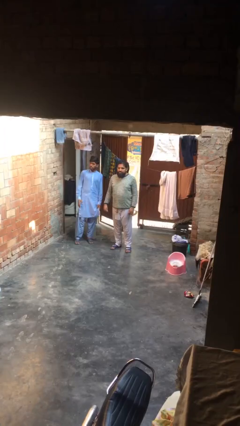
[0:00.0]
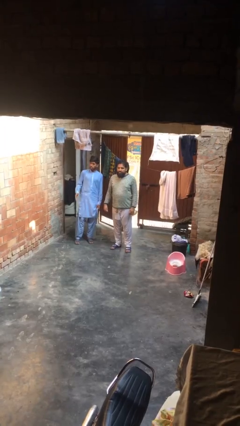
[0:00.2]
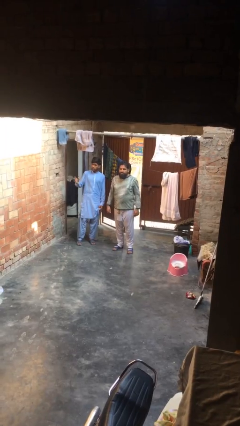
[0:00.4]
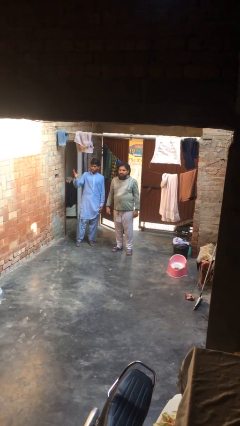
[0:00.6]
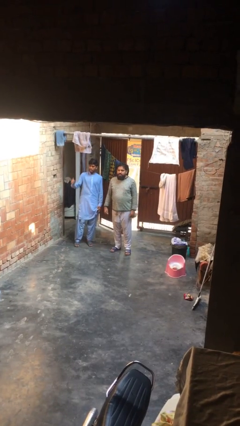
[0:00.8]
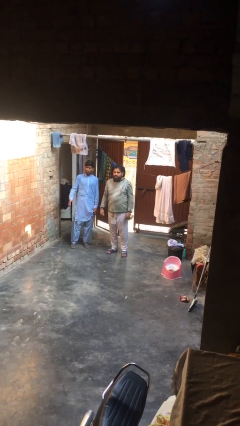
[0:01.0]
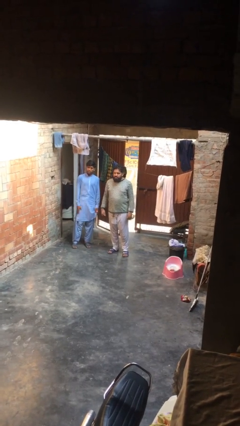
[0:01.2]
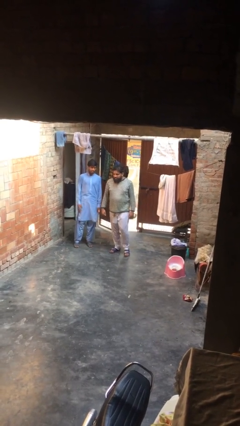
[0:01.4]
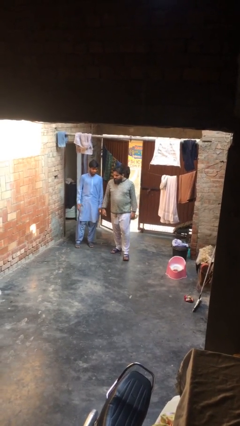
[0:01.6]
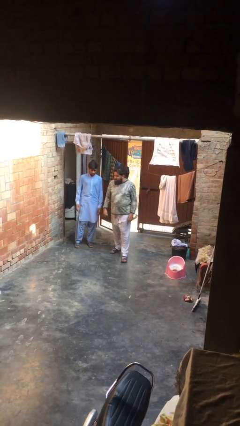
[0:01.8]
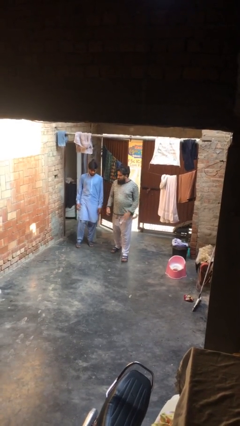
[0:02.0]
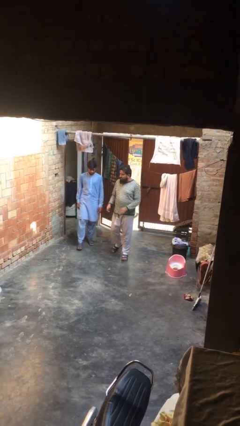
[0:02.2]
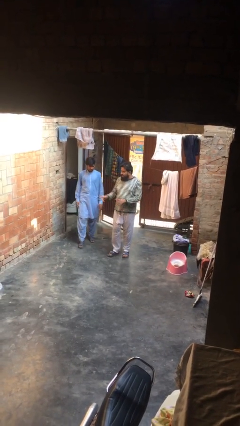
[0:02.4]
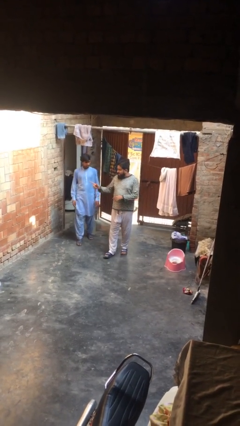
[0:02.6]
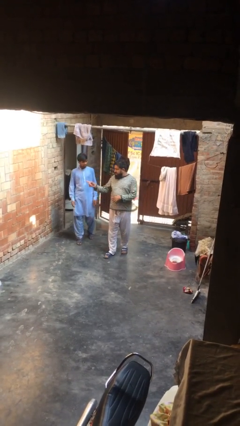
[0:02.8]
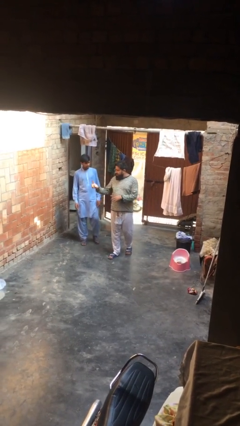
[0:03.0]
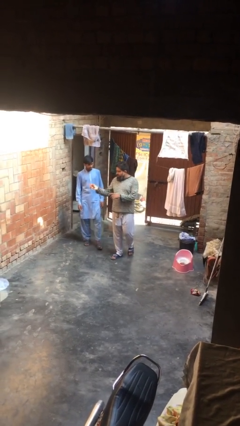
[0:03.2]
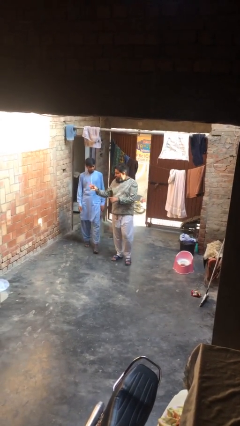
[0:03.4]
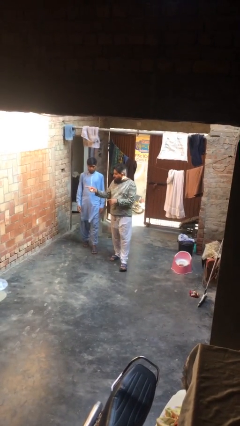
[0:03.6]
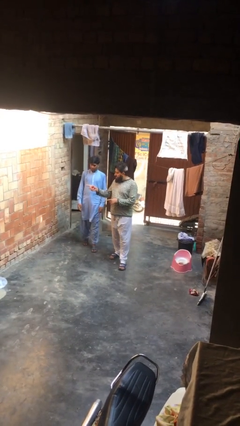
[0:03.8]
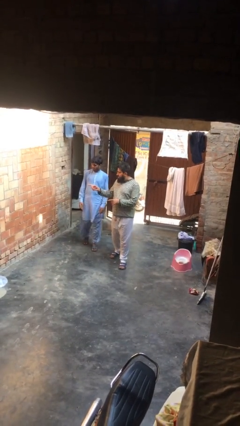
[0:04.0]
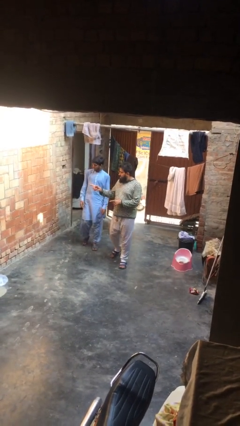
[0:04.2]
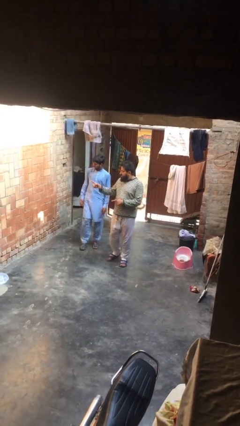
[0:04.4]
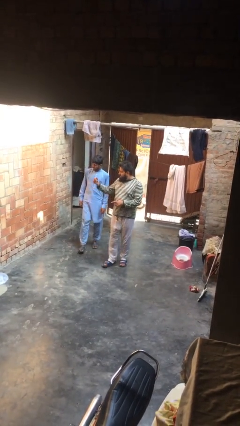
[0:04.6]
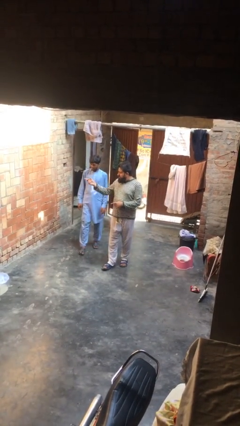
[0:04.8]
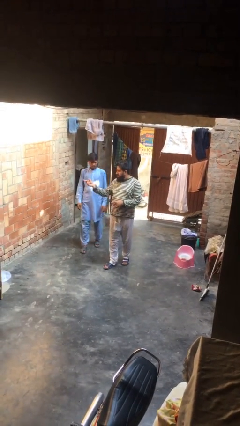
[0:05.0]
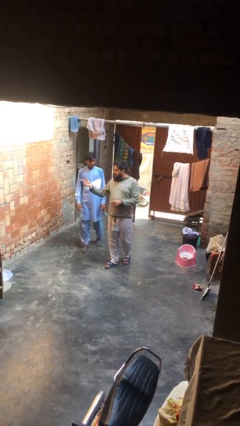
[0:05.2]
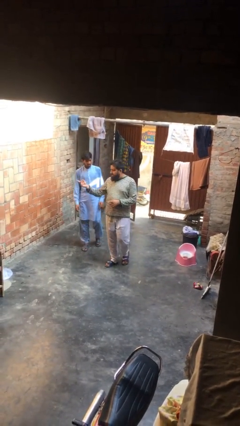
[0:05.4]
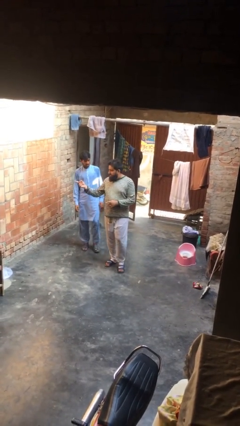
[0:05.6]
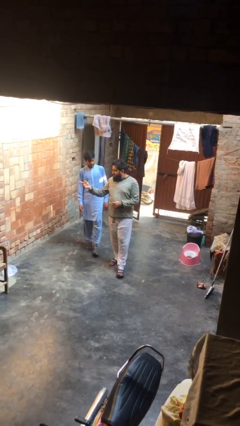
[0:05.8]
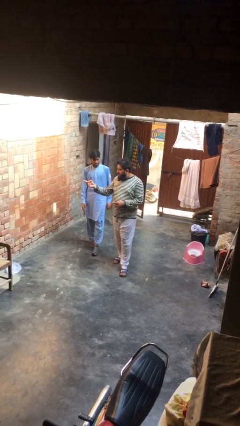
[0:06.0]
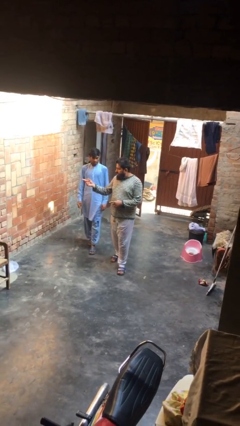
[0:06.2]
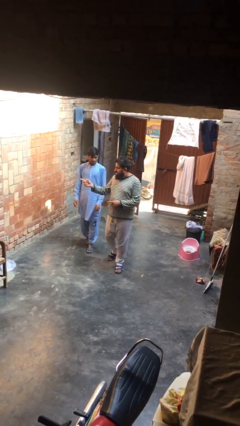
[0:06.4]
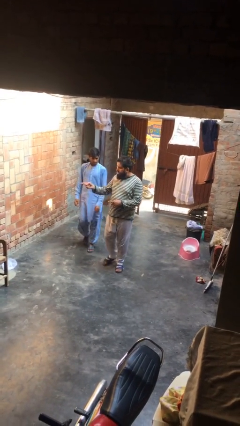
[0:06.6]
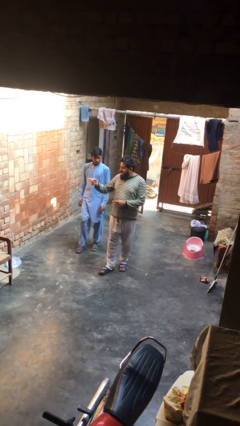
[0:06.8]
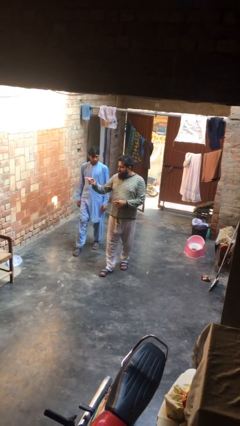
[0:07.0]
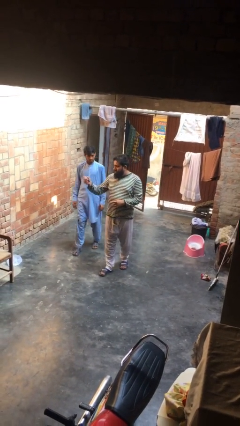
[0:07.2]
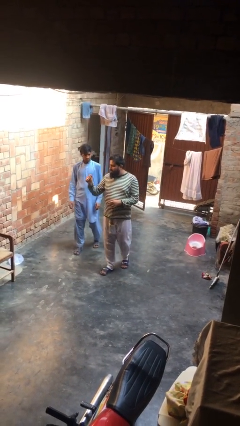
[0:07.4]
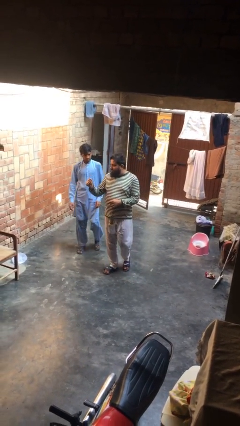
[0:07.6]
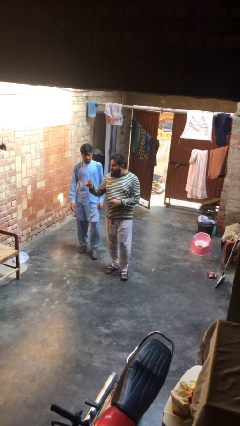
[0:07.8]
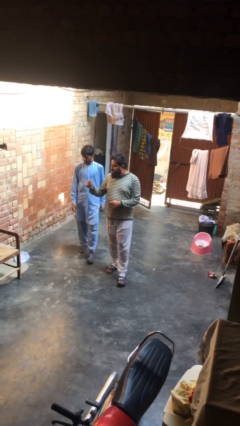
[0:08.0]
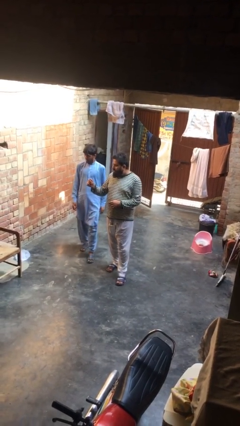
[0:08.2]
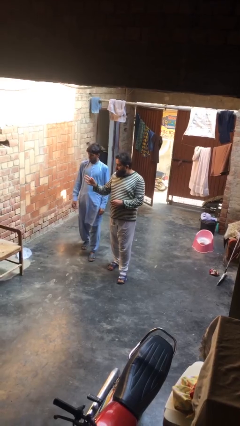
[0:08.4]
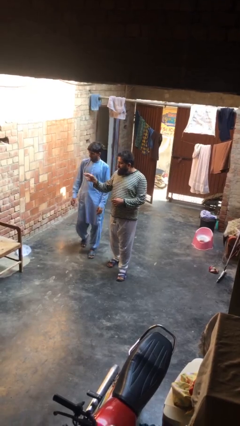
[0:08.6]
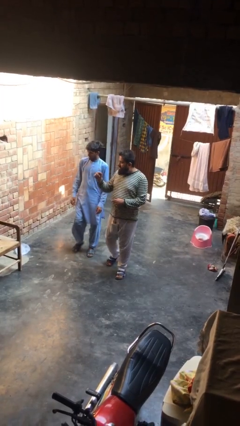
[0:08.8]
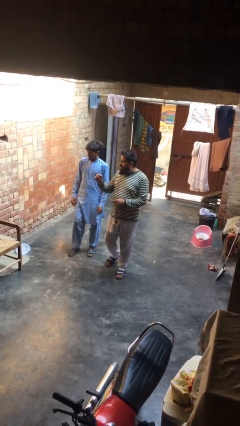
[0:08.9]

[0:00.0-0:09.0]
person talks to person

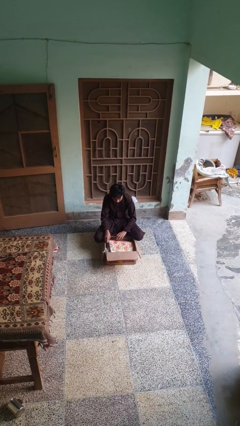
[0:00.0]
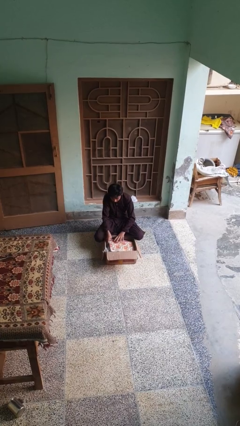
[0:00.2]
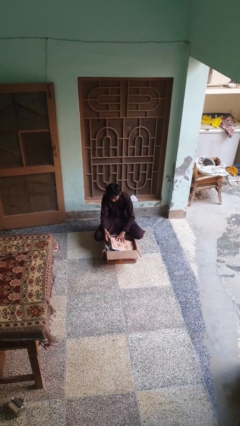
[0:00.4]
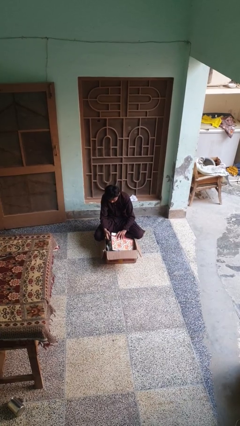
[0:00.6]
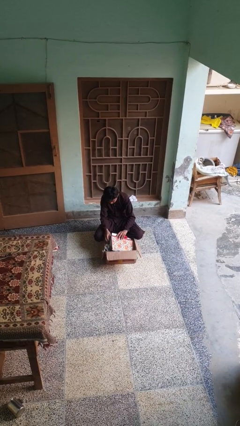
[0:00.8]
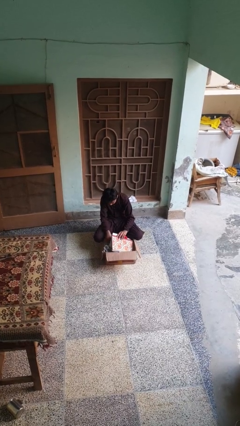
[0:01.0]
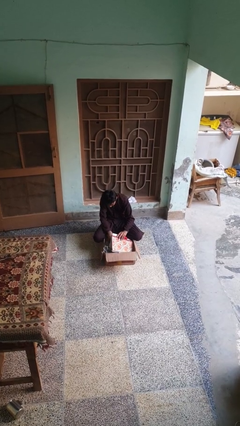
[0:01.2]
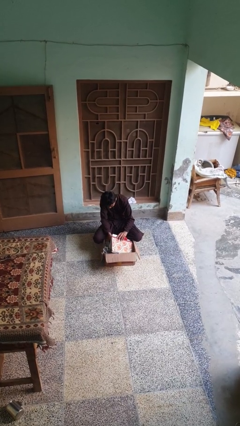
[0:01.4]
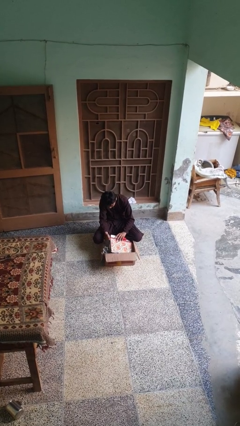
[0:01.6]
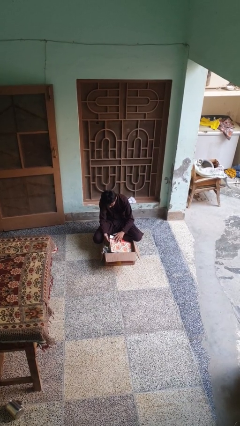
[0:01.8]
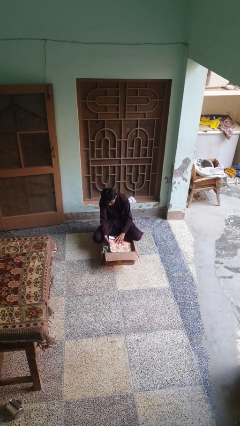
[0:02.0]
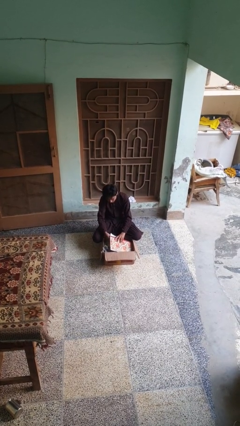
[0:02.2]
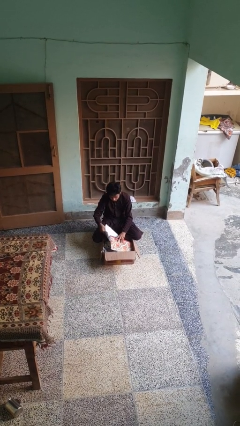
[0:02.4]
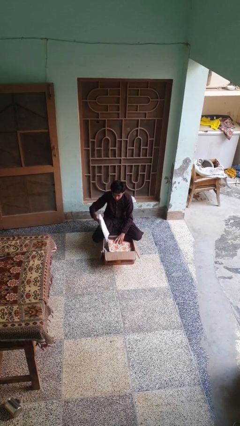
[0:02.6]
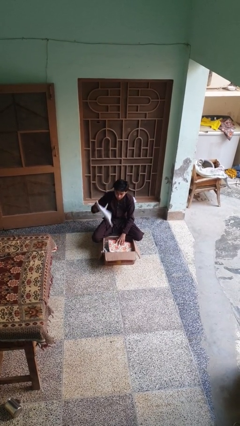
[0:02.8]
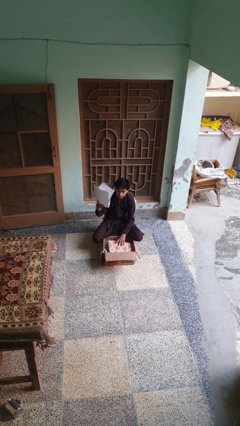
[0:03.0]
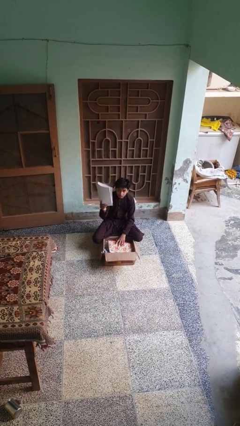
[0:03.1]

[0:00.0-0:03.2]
person takes object from box

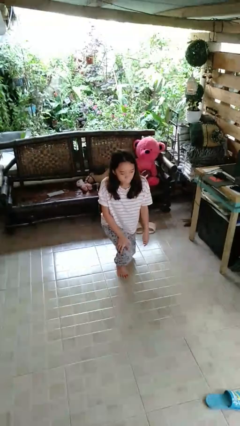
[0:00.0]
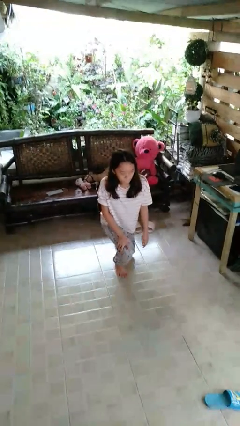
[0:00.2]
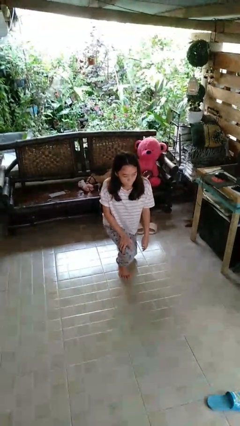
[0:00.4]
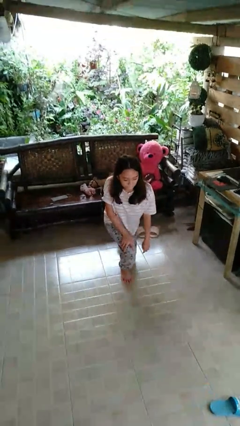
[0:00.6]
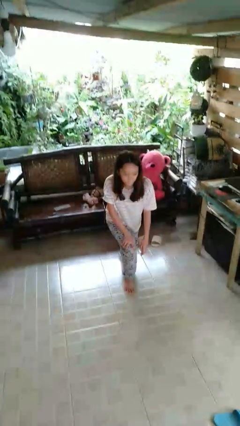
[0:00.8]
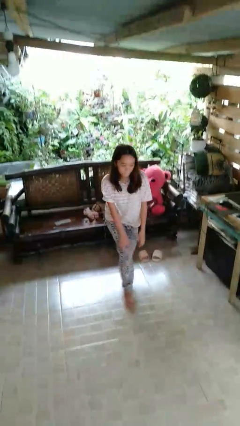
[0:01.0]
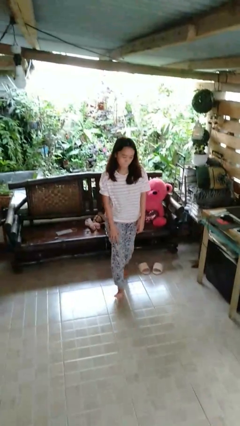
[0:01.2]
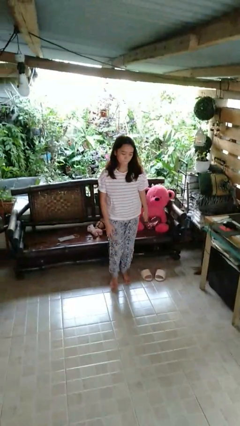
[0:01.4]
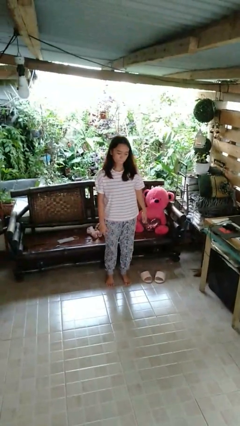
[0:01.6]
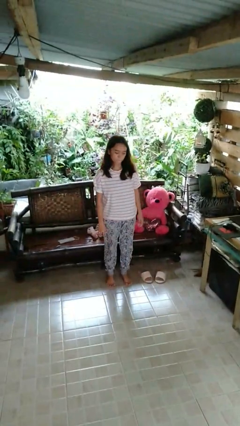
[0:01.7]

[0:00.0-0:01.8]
person stands up from floor

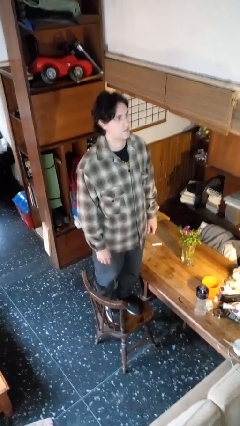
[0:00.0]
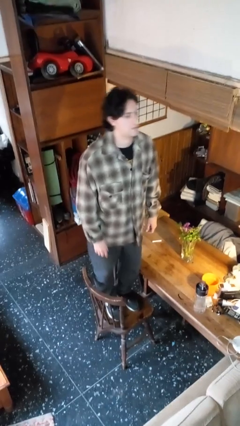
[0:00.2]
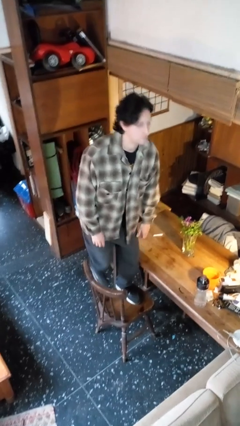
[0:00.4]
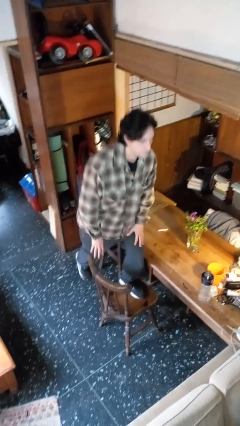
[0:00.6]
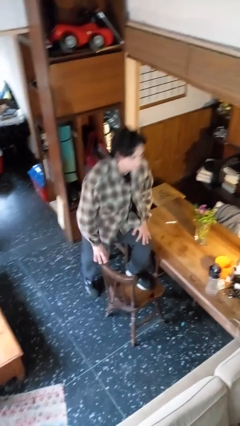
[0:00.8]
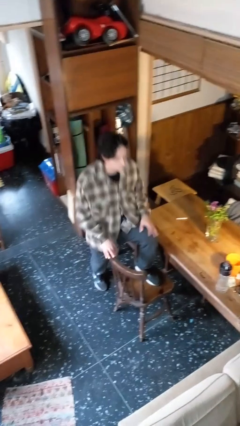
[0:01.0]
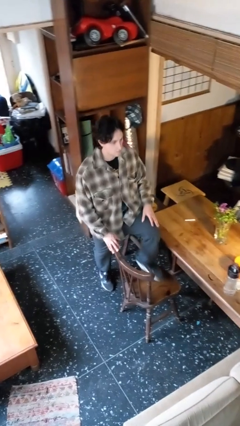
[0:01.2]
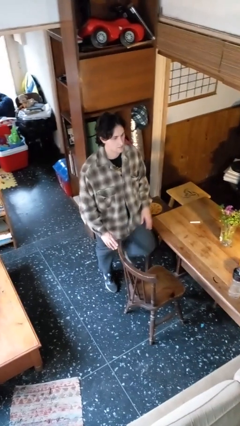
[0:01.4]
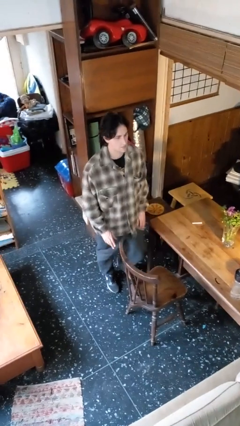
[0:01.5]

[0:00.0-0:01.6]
person climbs off chair

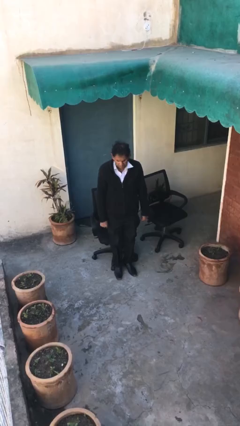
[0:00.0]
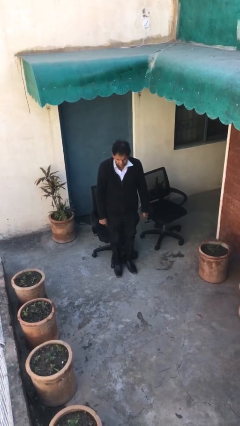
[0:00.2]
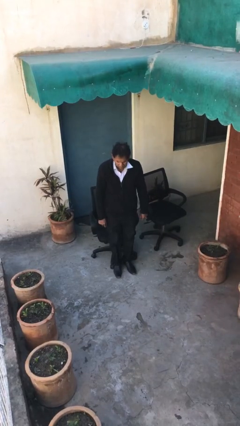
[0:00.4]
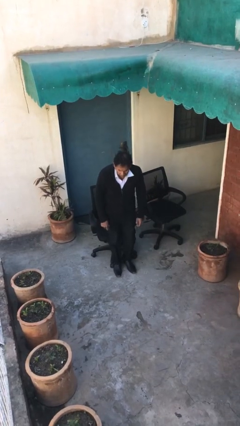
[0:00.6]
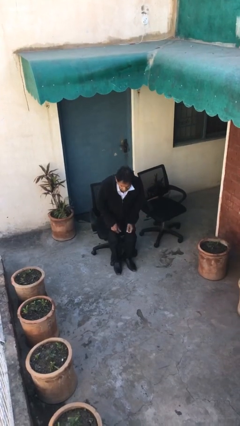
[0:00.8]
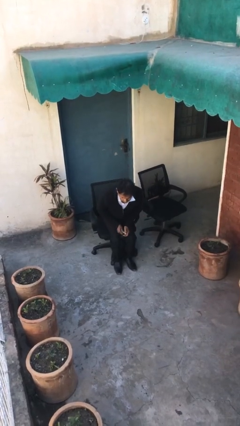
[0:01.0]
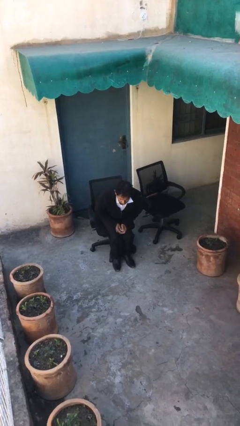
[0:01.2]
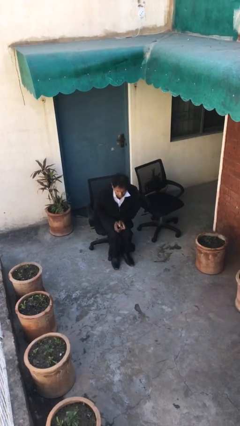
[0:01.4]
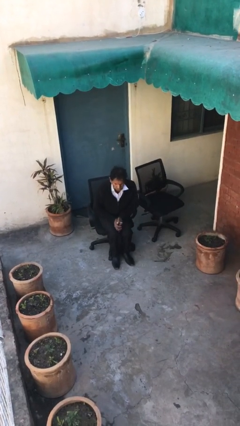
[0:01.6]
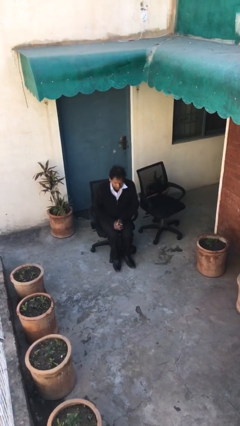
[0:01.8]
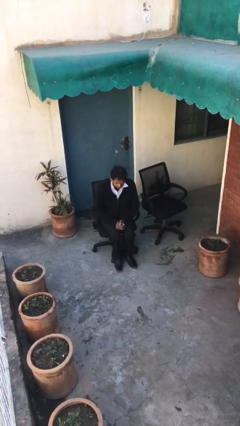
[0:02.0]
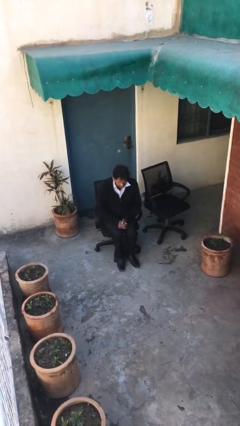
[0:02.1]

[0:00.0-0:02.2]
person sits down
